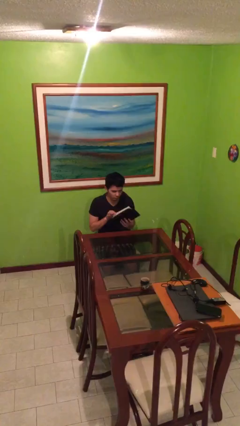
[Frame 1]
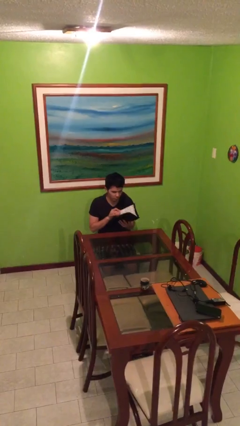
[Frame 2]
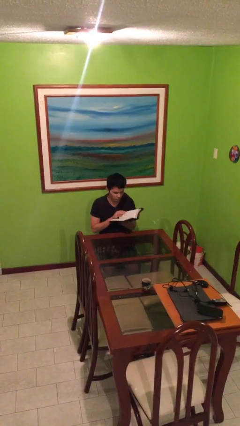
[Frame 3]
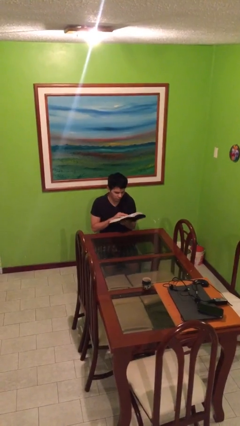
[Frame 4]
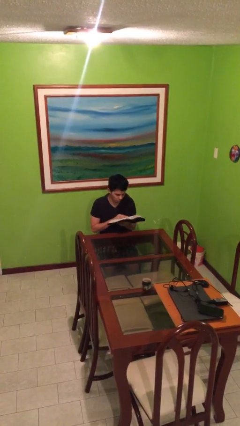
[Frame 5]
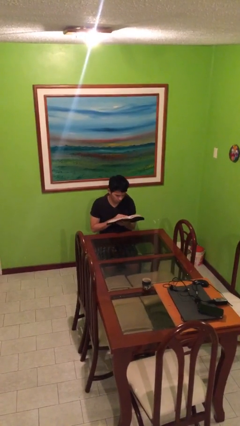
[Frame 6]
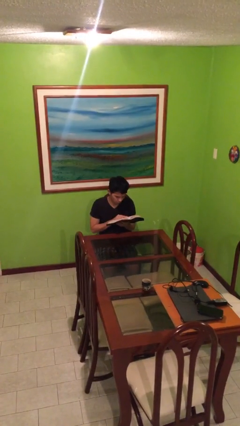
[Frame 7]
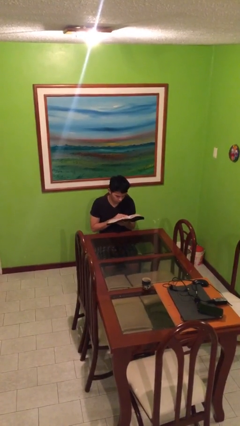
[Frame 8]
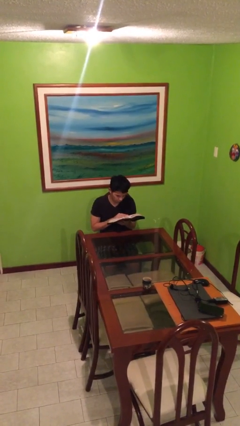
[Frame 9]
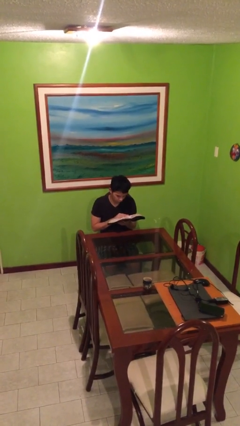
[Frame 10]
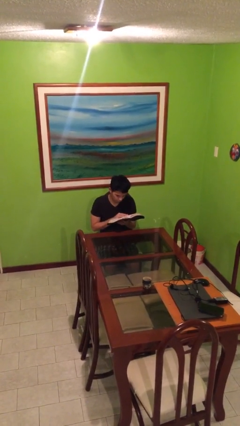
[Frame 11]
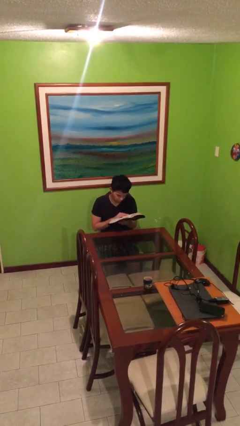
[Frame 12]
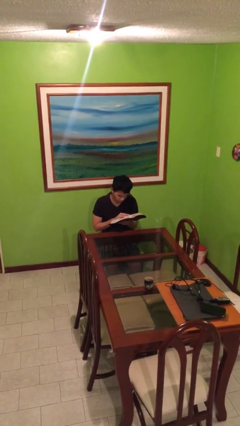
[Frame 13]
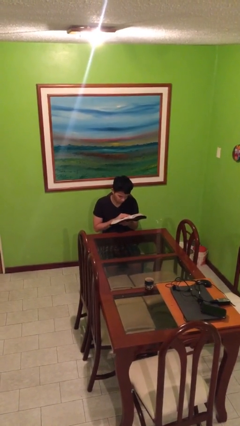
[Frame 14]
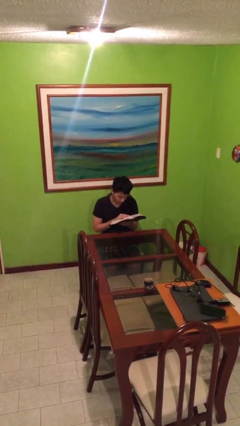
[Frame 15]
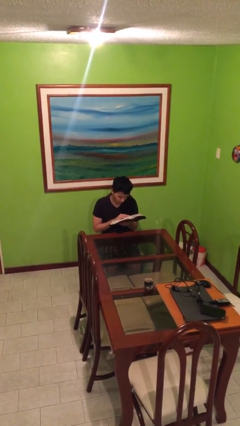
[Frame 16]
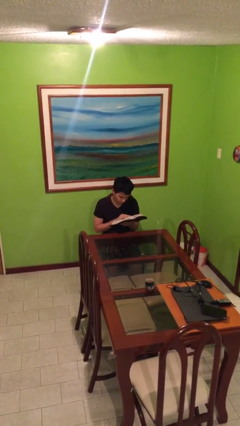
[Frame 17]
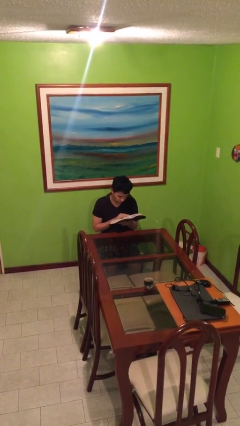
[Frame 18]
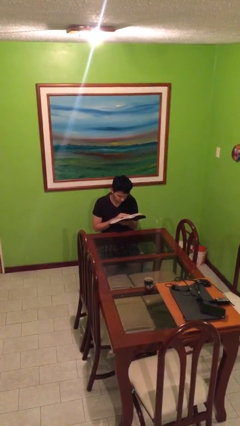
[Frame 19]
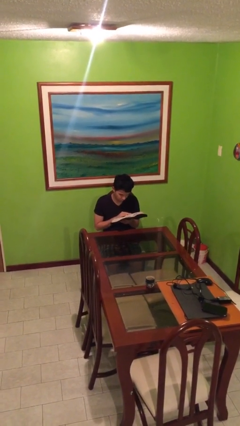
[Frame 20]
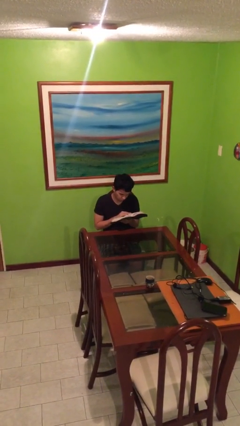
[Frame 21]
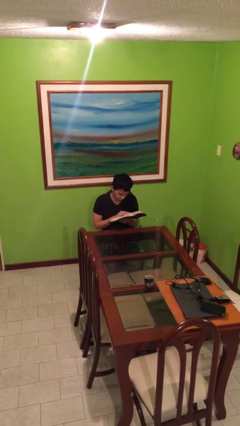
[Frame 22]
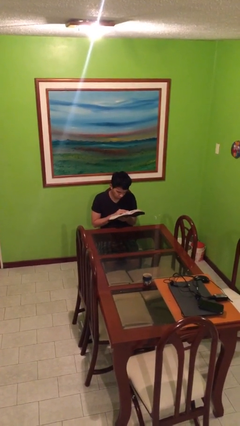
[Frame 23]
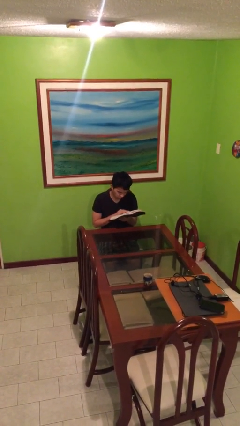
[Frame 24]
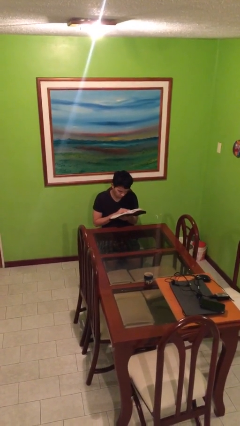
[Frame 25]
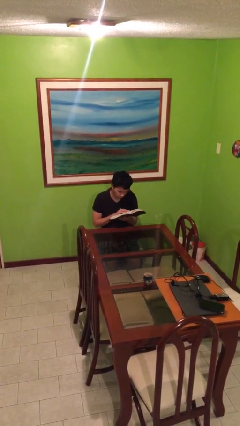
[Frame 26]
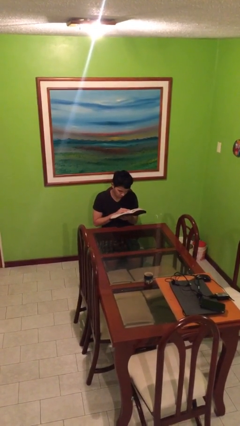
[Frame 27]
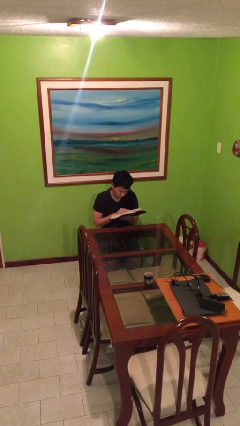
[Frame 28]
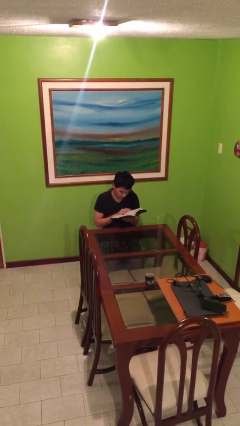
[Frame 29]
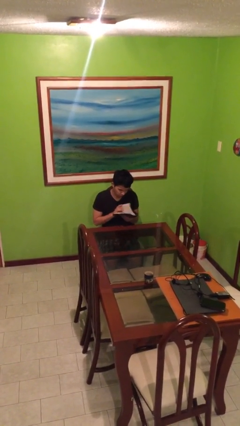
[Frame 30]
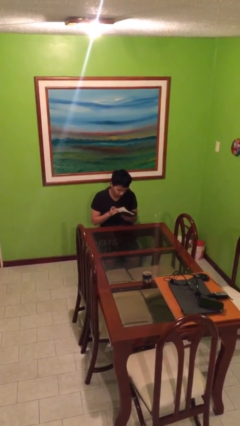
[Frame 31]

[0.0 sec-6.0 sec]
person reads document

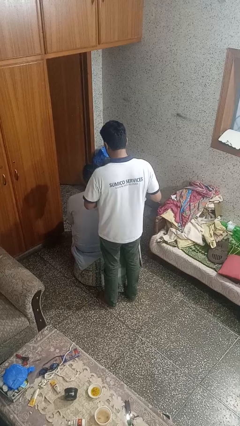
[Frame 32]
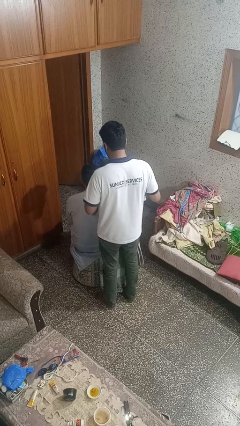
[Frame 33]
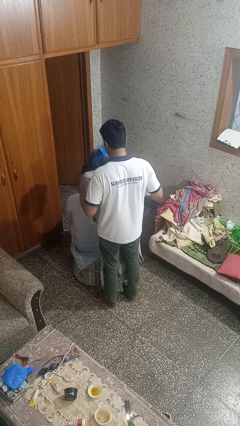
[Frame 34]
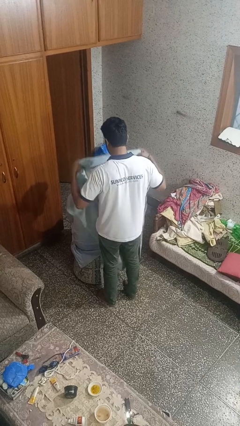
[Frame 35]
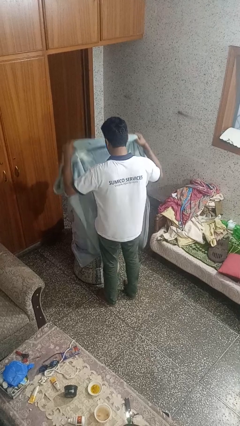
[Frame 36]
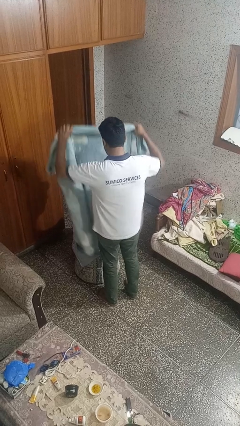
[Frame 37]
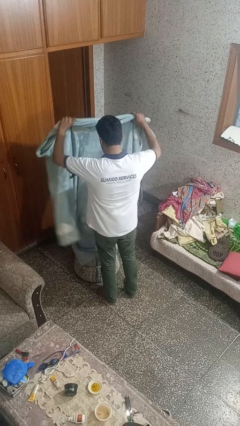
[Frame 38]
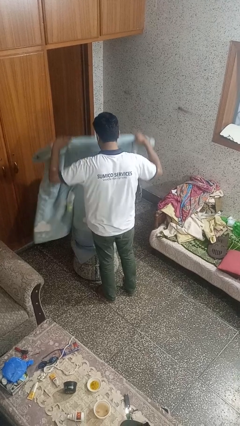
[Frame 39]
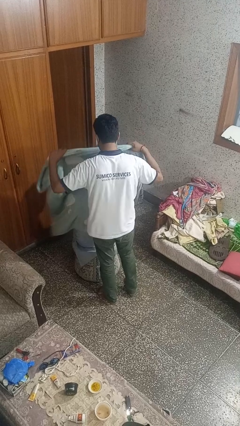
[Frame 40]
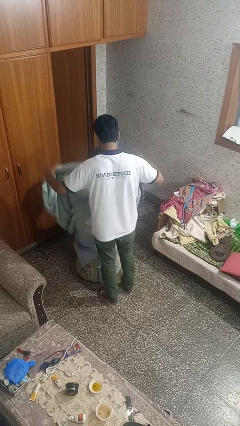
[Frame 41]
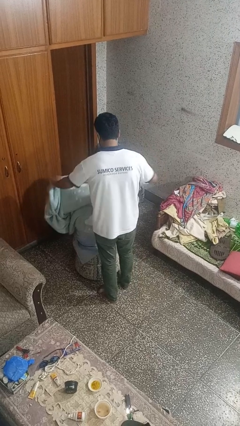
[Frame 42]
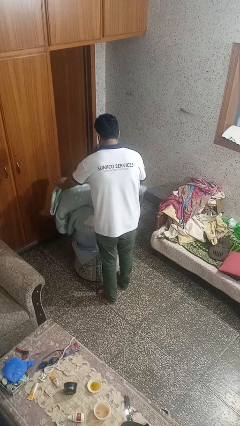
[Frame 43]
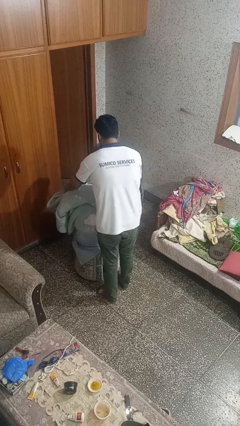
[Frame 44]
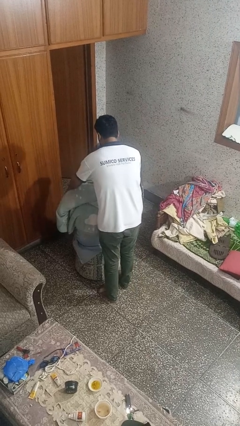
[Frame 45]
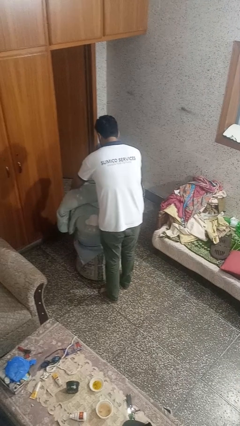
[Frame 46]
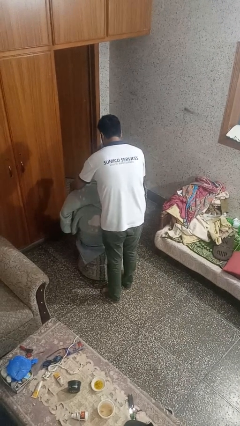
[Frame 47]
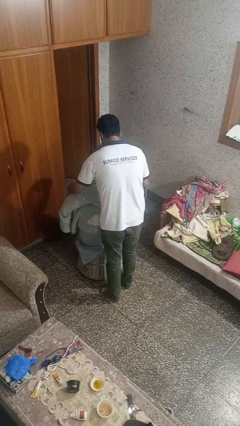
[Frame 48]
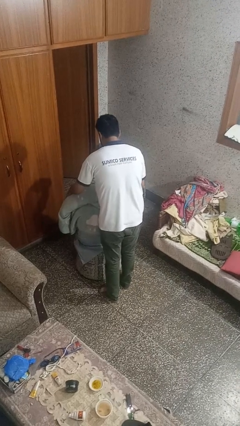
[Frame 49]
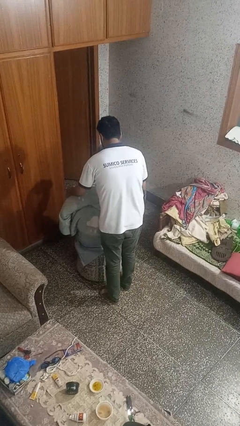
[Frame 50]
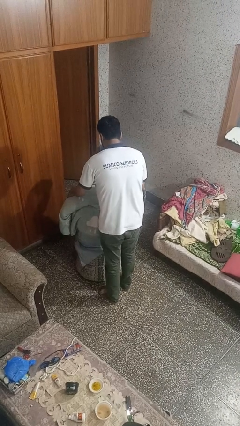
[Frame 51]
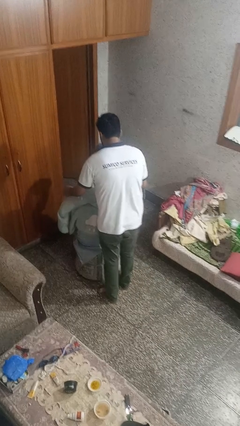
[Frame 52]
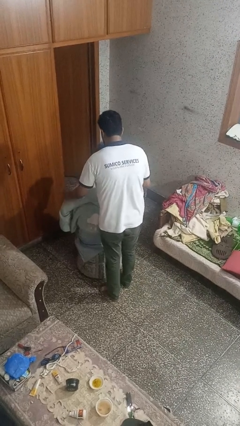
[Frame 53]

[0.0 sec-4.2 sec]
person covers friend with blanket

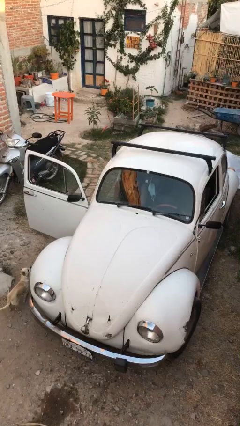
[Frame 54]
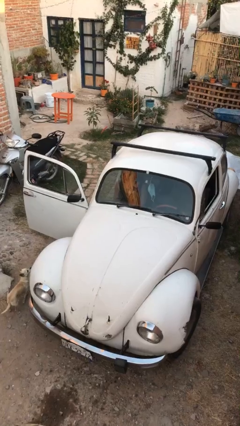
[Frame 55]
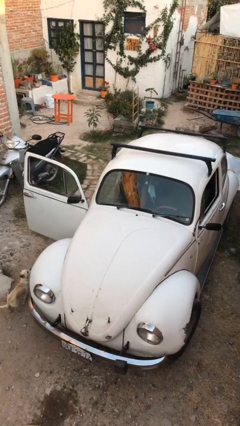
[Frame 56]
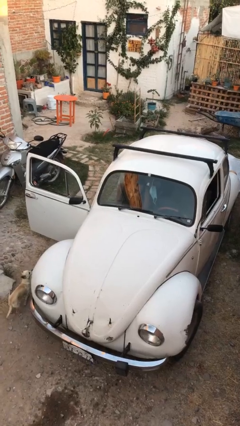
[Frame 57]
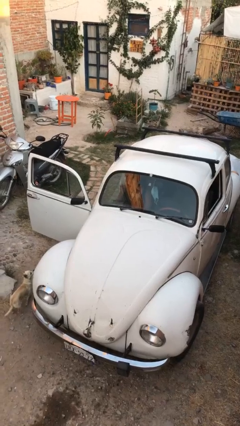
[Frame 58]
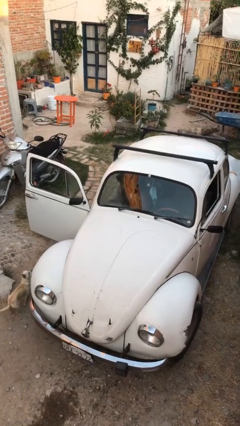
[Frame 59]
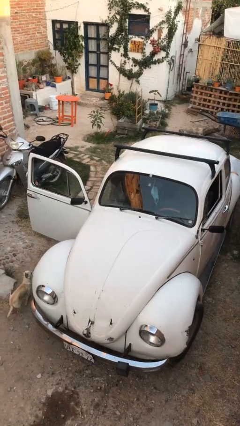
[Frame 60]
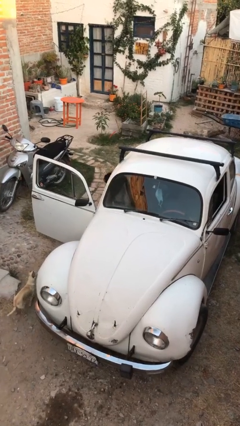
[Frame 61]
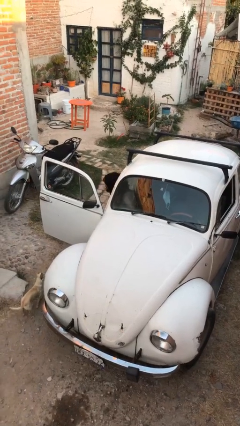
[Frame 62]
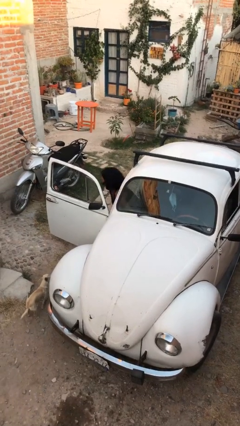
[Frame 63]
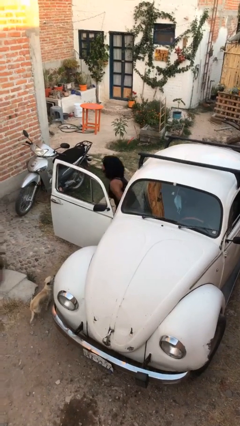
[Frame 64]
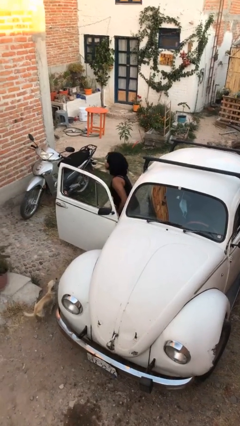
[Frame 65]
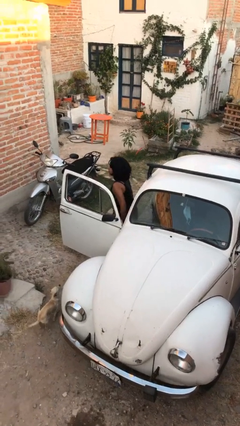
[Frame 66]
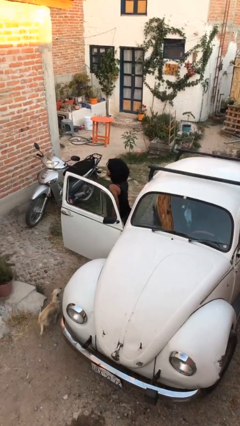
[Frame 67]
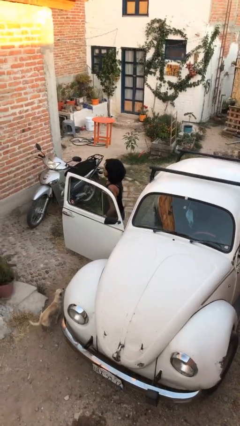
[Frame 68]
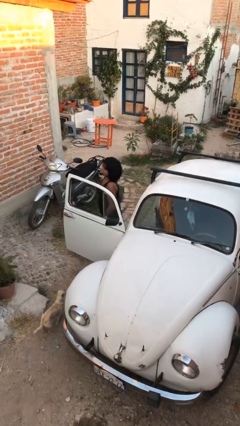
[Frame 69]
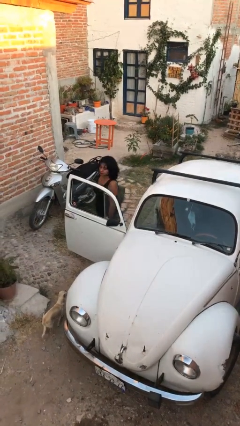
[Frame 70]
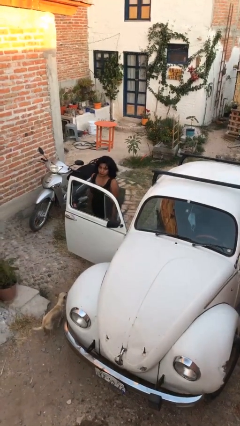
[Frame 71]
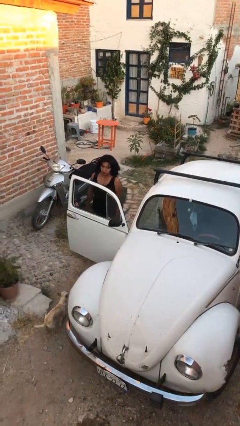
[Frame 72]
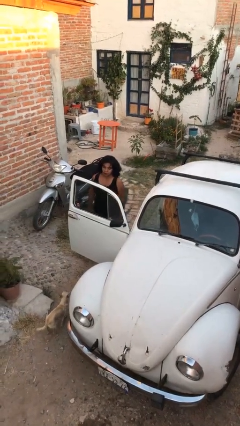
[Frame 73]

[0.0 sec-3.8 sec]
person exits car

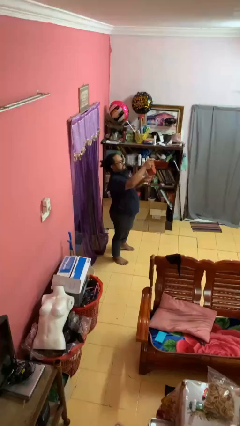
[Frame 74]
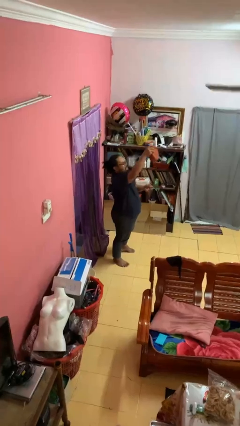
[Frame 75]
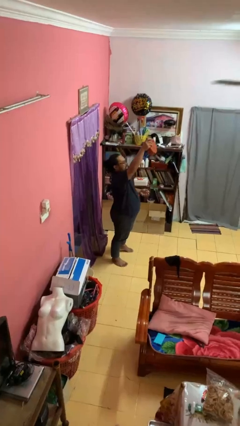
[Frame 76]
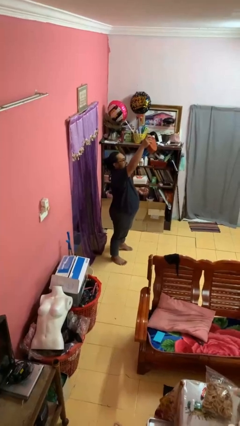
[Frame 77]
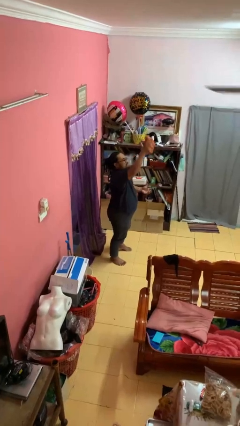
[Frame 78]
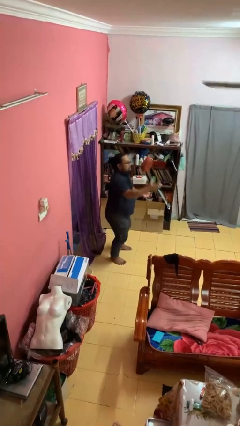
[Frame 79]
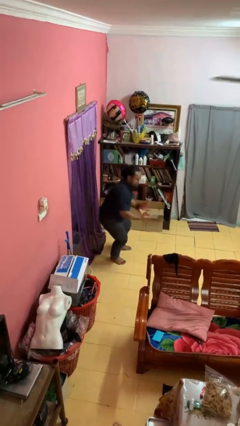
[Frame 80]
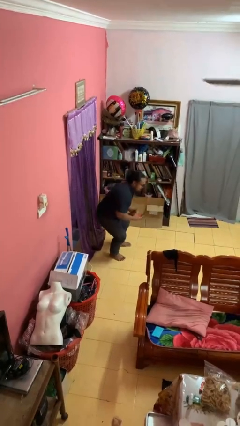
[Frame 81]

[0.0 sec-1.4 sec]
person drops object

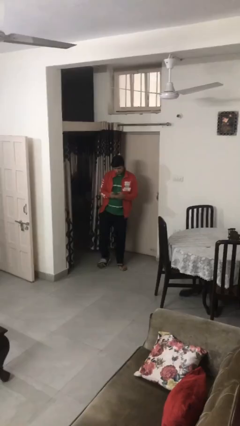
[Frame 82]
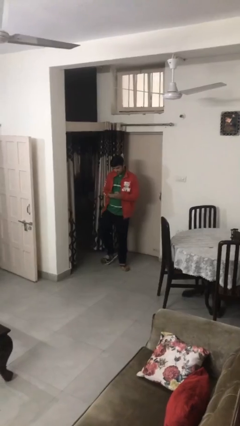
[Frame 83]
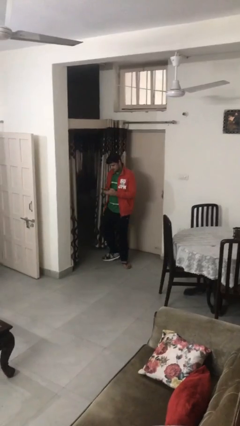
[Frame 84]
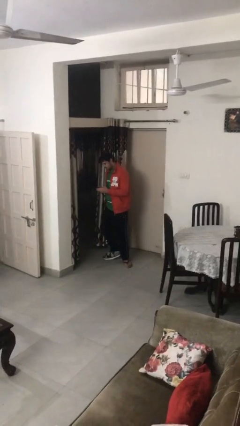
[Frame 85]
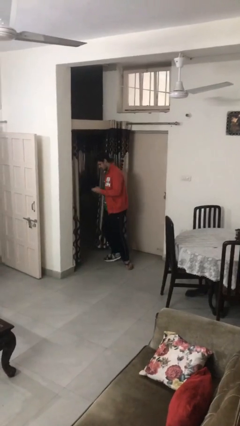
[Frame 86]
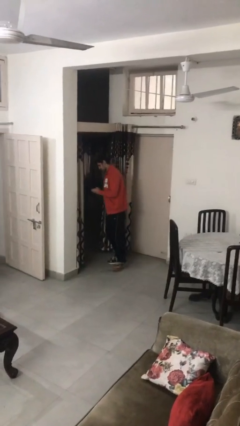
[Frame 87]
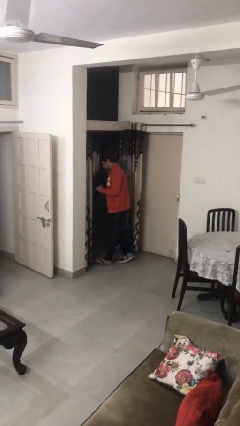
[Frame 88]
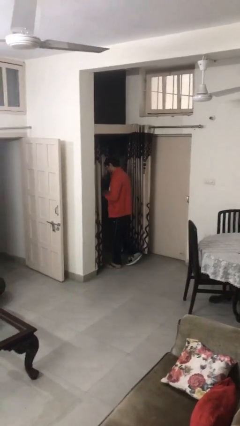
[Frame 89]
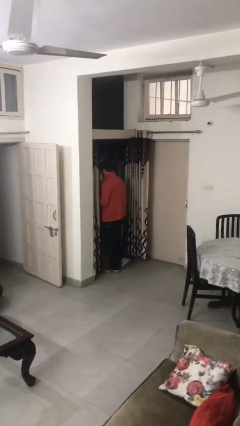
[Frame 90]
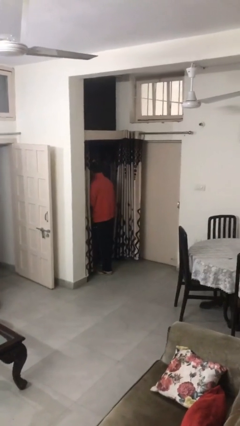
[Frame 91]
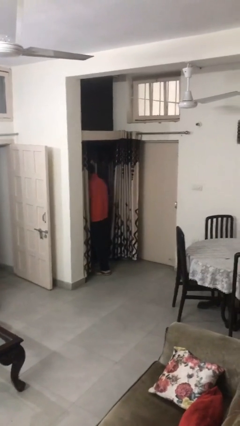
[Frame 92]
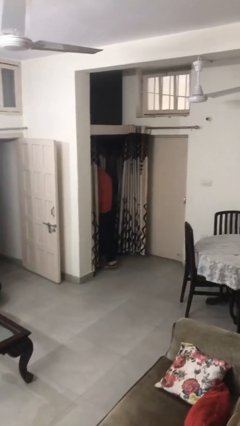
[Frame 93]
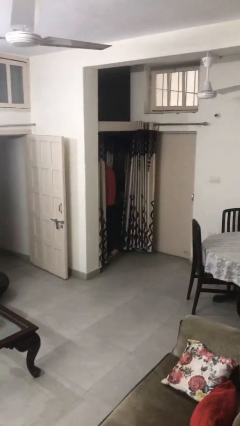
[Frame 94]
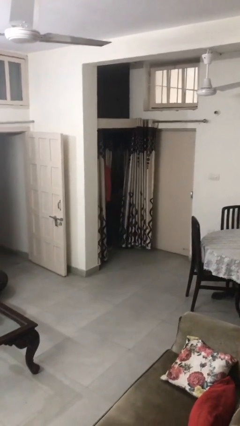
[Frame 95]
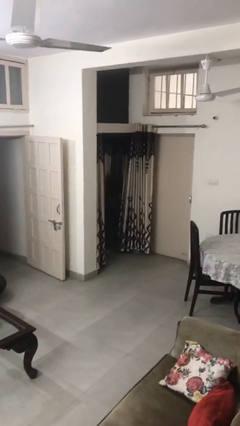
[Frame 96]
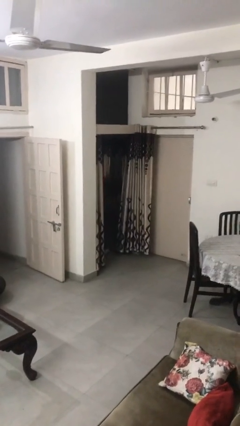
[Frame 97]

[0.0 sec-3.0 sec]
person exits scene through structure
